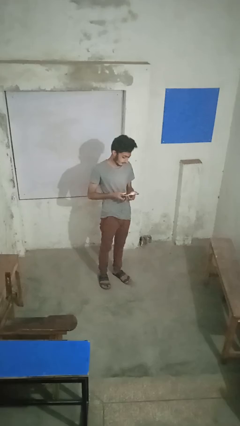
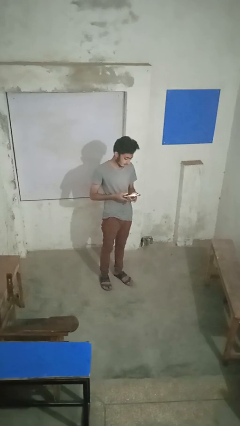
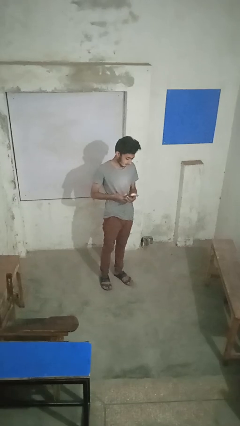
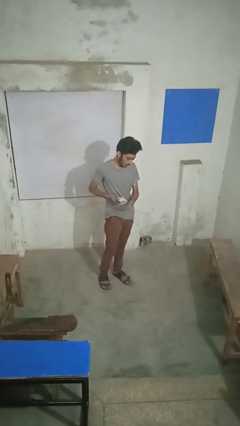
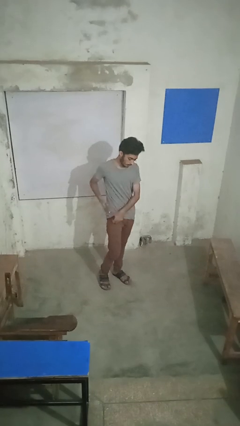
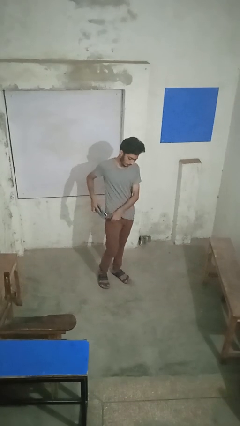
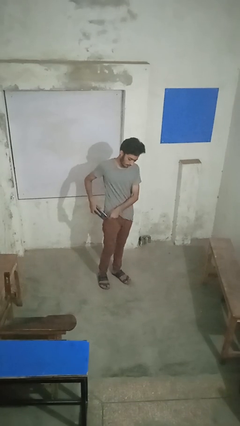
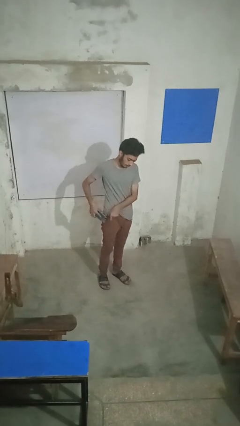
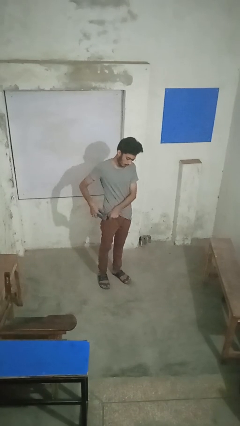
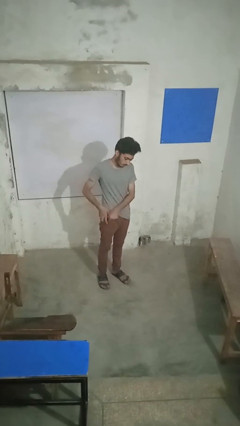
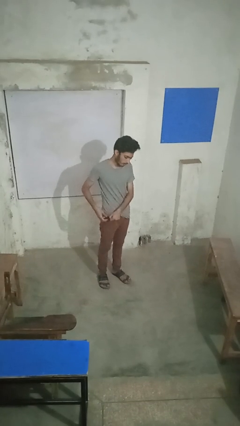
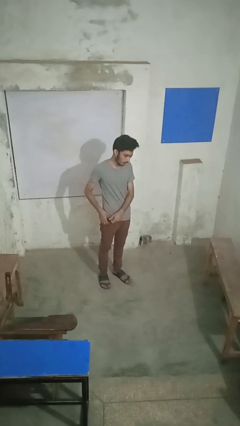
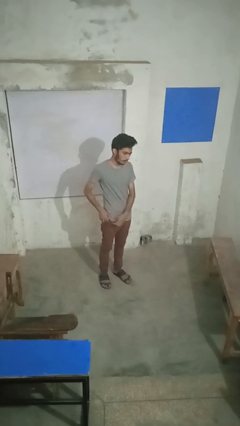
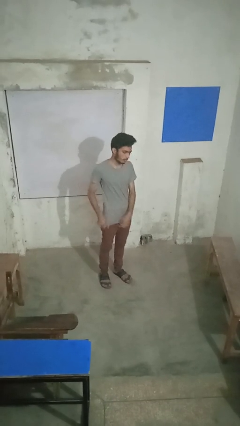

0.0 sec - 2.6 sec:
person puts phone into pocket

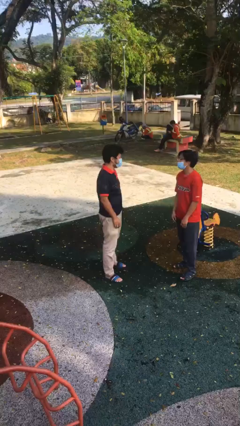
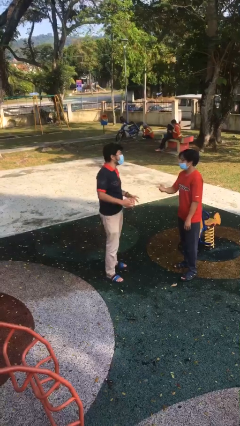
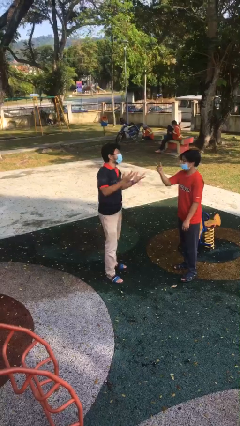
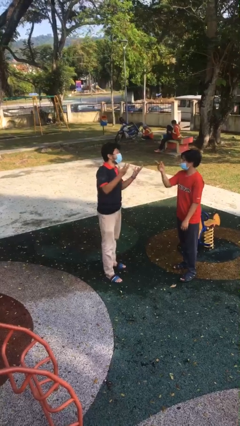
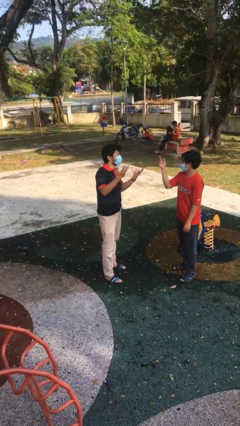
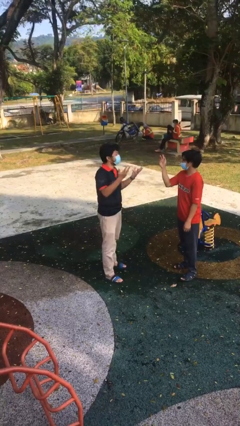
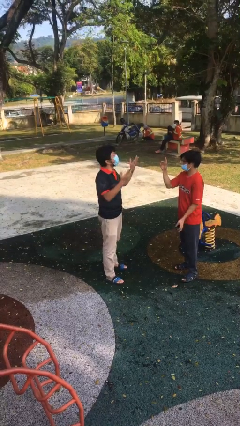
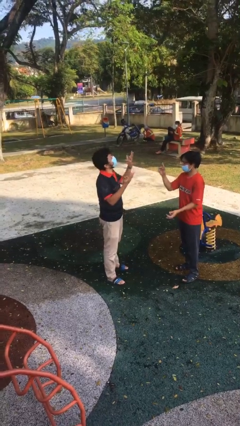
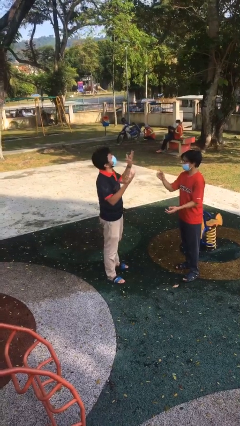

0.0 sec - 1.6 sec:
person talks to person

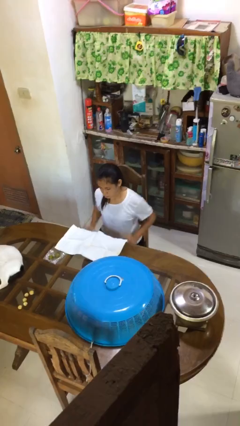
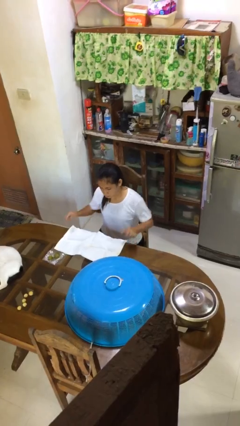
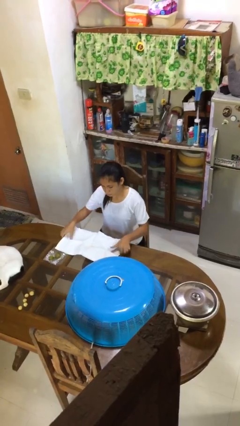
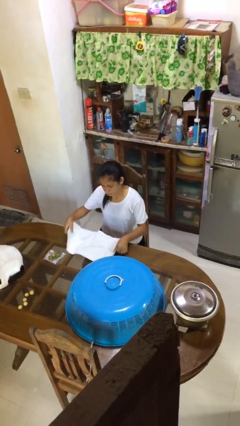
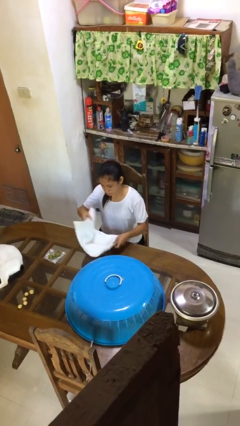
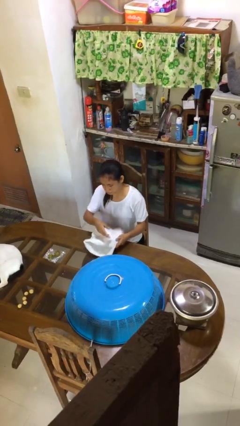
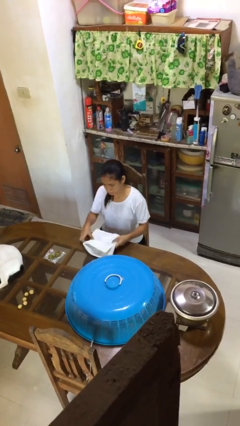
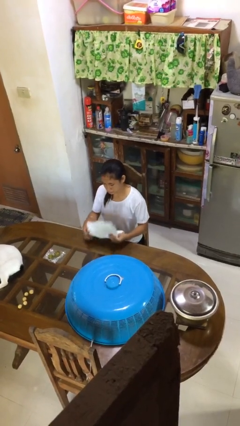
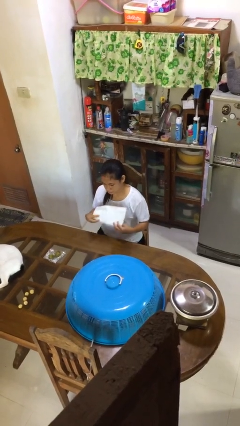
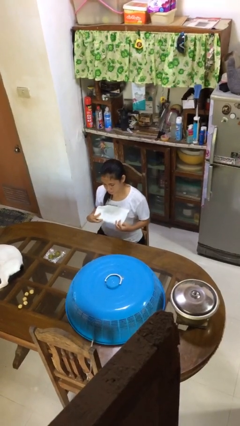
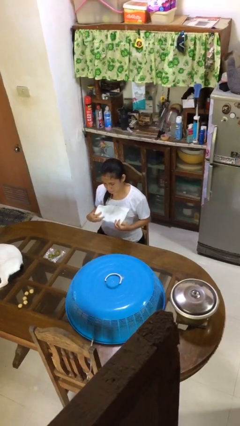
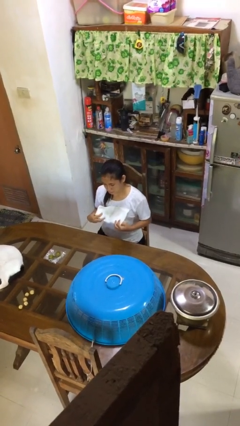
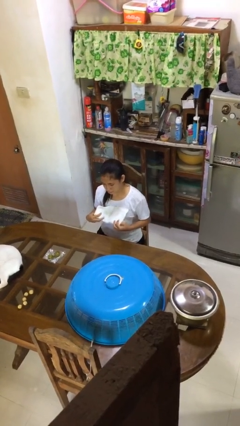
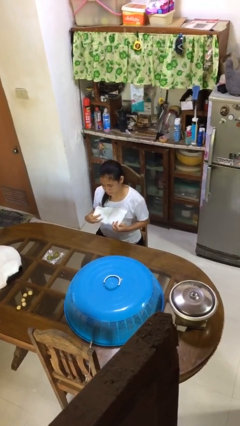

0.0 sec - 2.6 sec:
person folds tablecloth

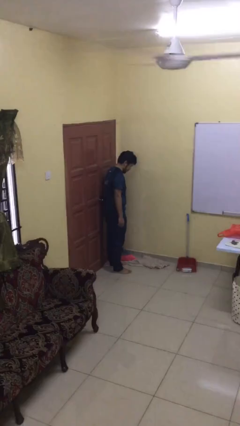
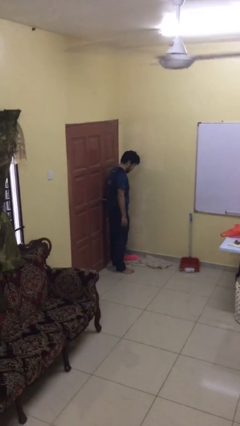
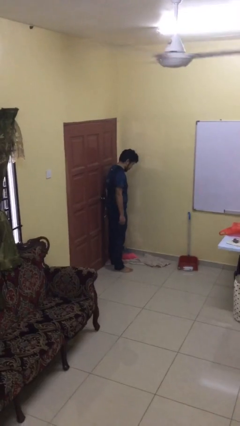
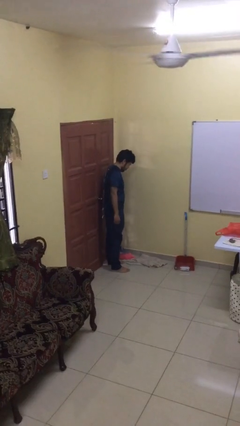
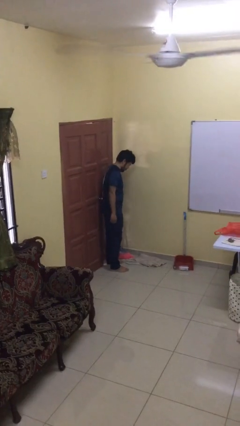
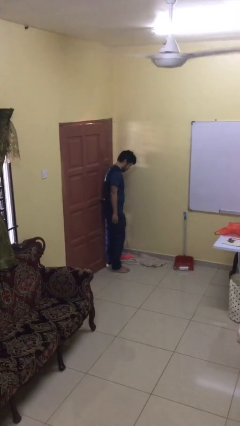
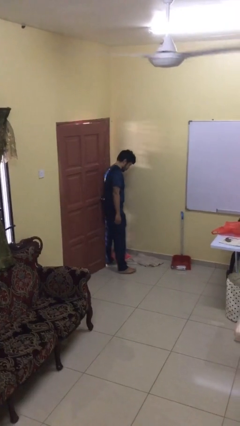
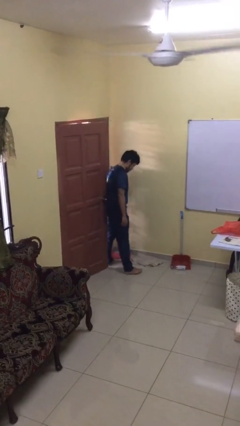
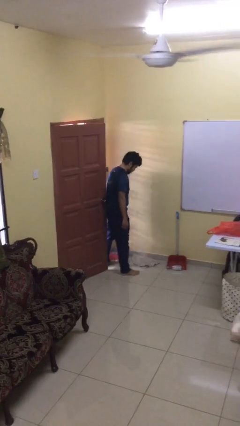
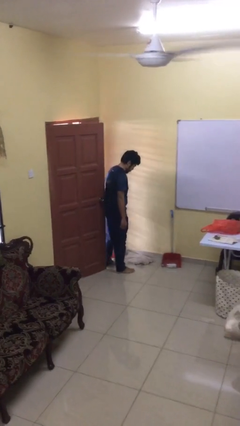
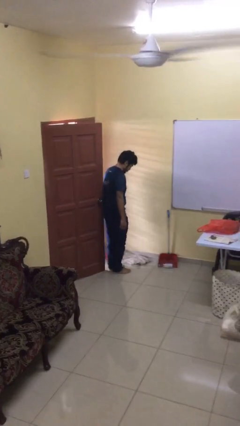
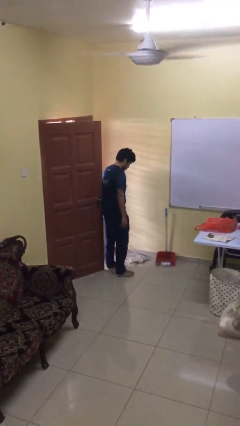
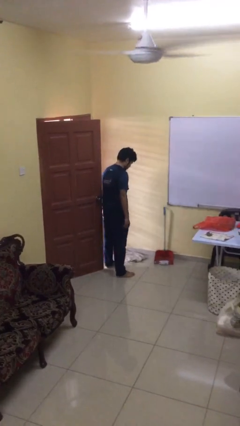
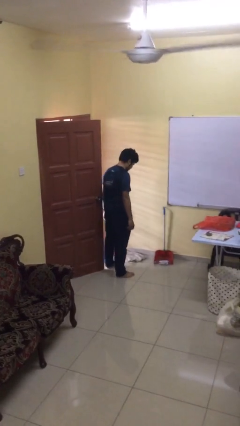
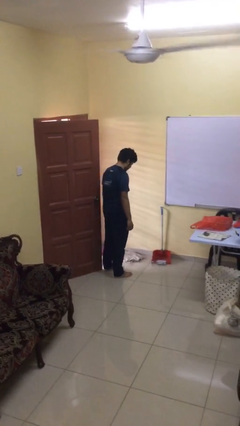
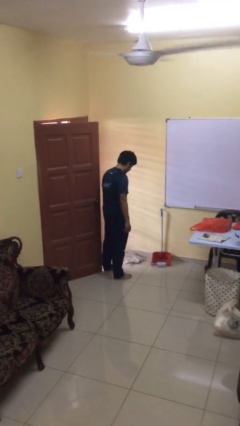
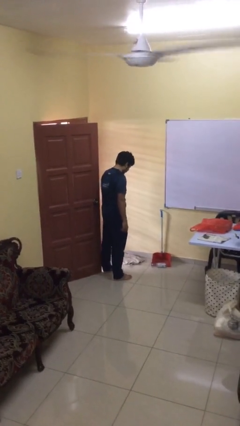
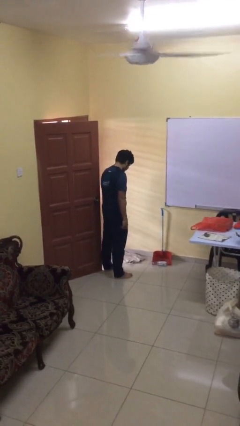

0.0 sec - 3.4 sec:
person opens facility door

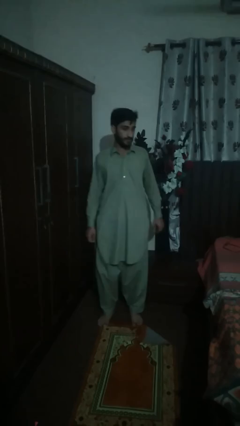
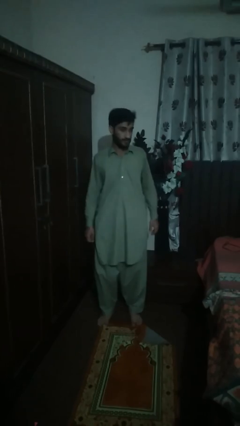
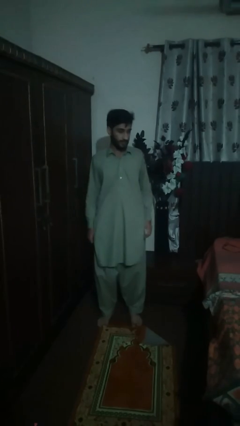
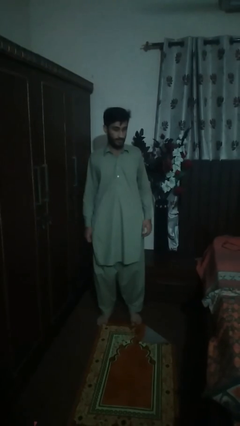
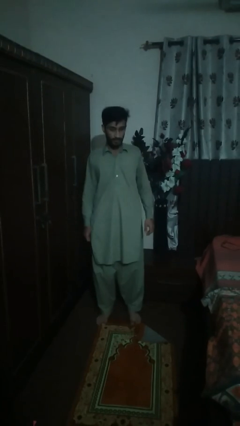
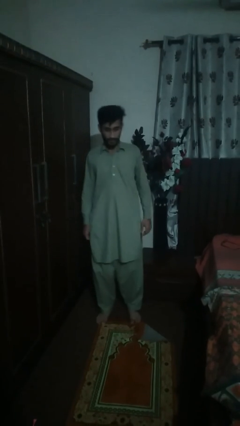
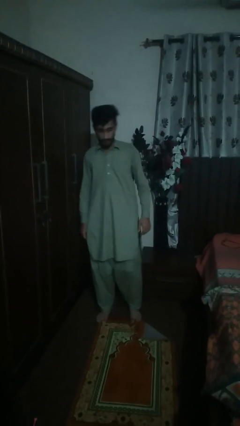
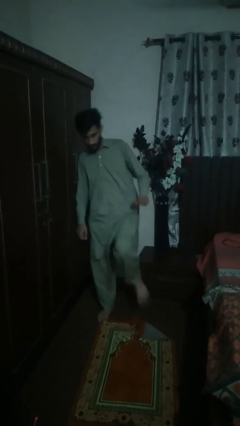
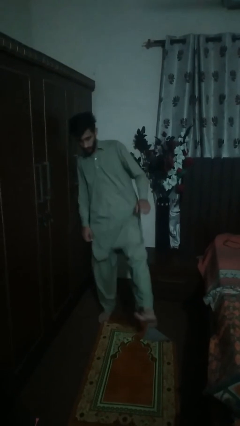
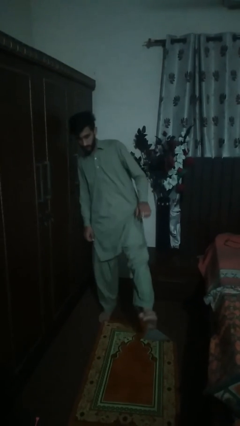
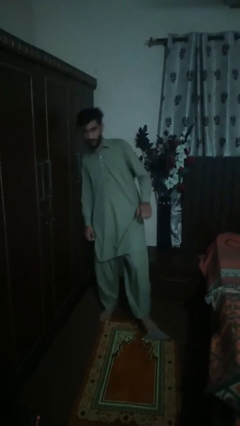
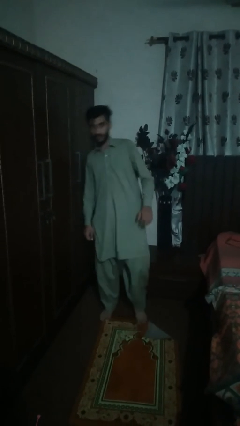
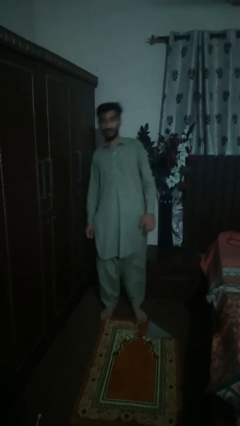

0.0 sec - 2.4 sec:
person karate kicks

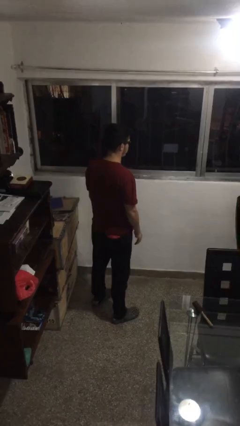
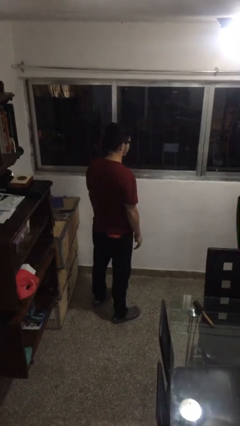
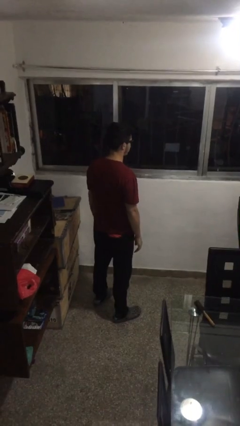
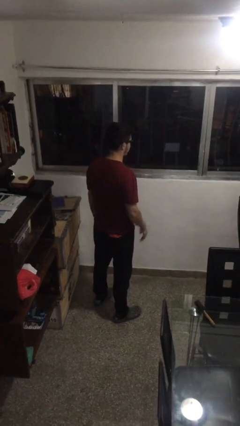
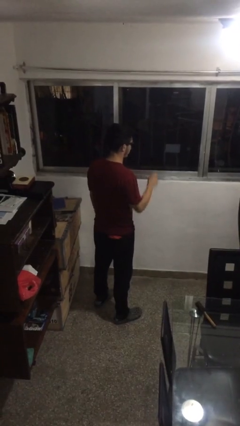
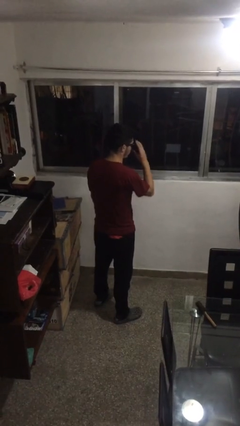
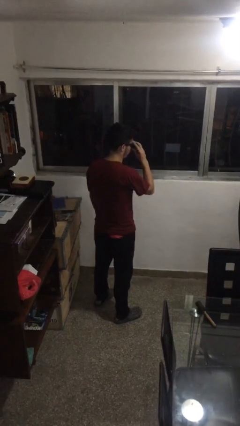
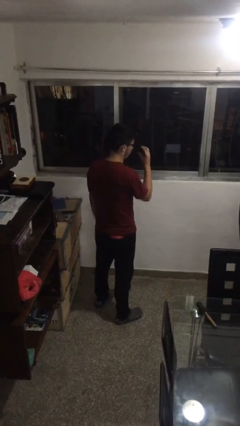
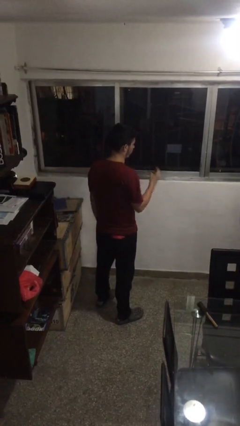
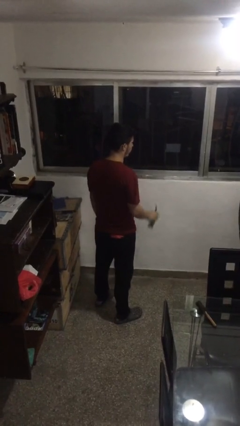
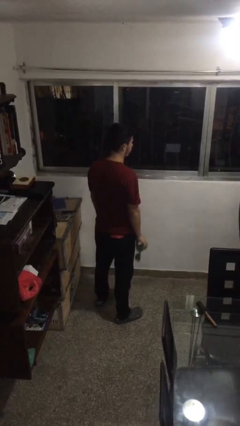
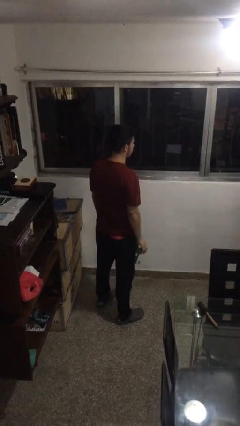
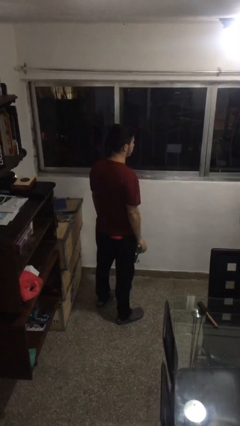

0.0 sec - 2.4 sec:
person takes off sunglasses

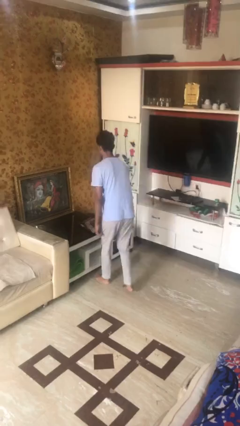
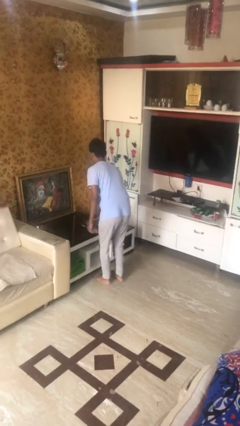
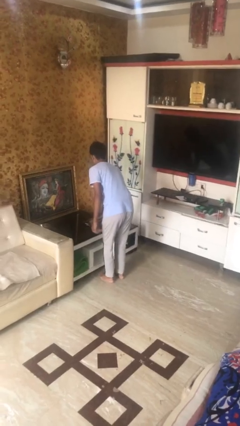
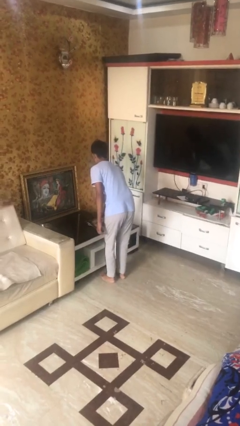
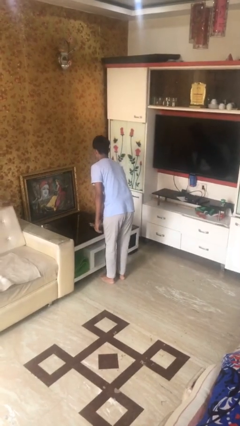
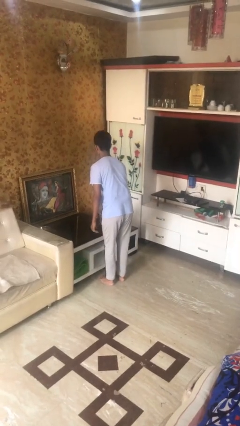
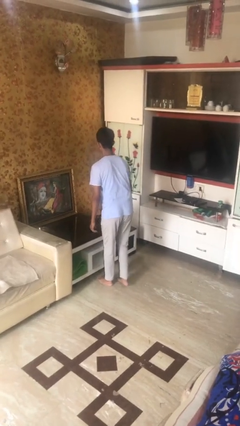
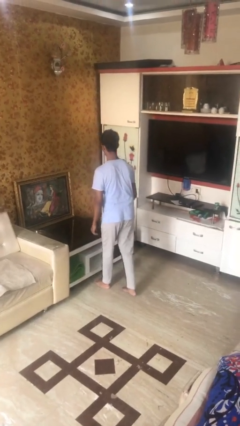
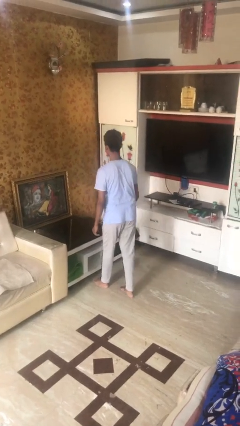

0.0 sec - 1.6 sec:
person picks up object from table

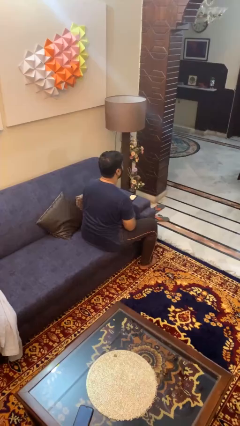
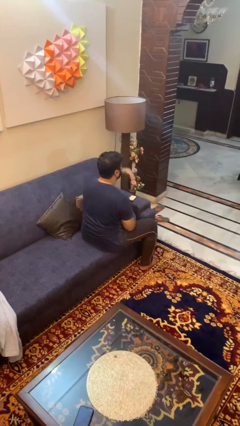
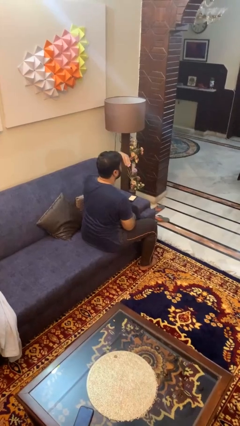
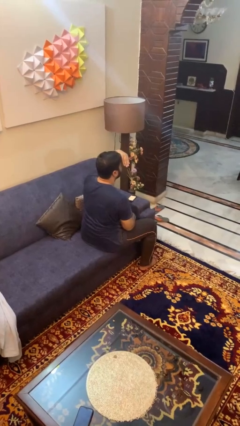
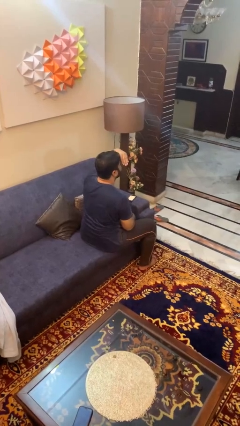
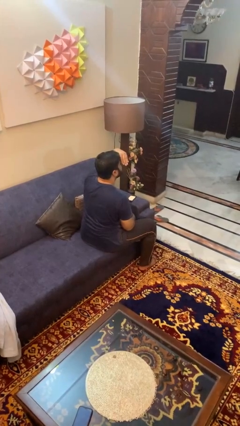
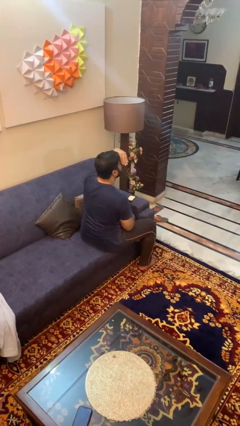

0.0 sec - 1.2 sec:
person shades eyes
